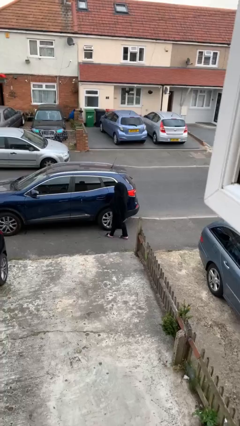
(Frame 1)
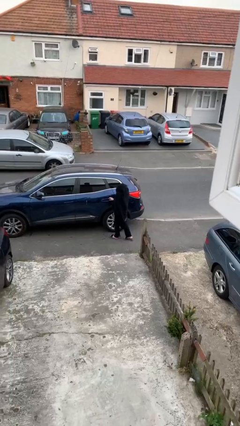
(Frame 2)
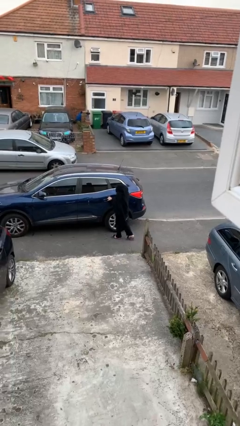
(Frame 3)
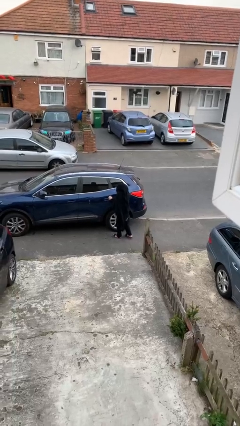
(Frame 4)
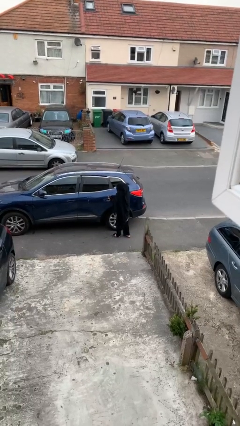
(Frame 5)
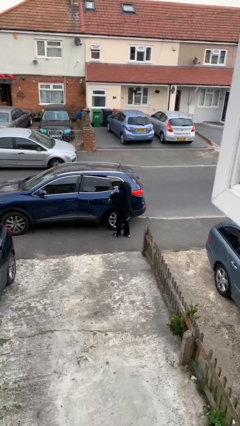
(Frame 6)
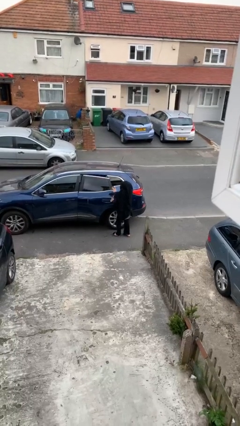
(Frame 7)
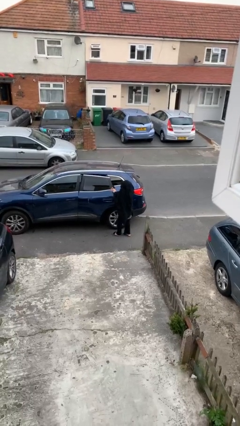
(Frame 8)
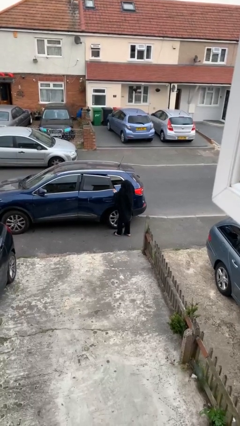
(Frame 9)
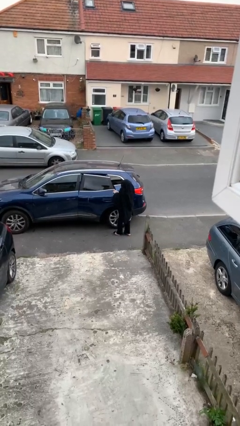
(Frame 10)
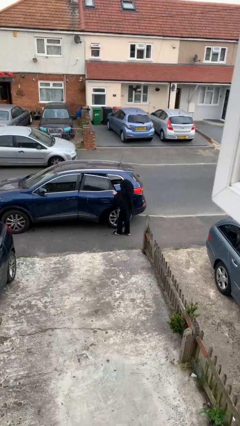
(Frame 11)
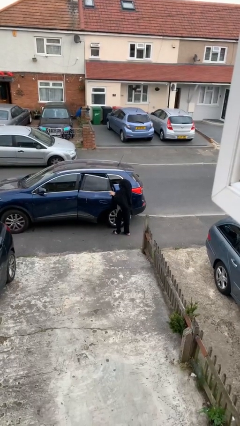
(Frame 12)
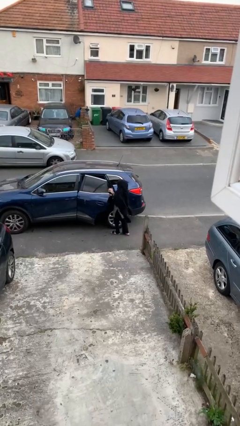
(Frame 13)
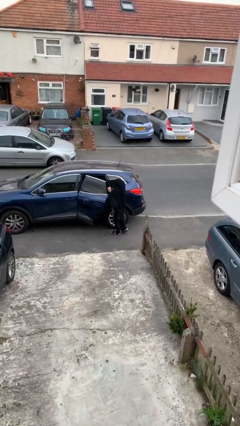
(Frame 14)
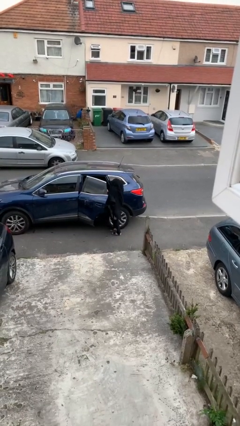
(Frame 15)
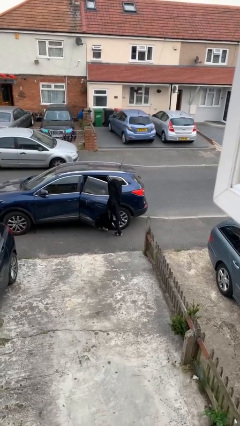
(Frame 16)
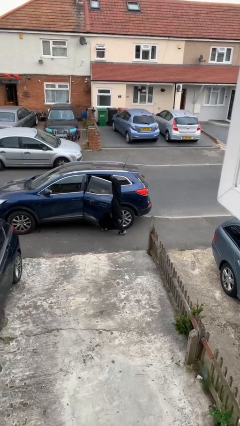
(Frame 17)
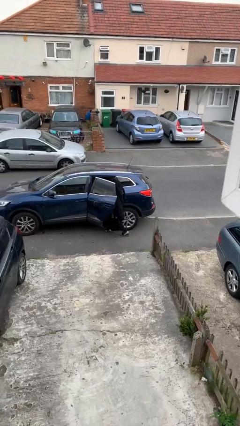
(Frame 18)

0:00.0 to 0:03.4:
person opens car door

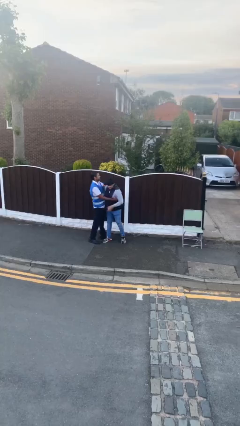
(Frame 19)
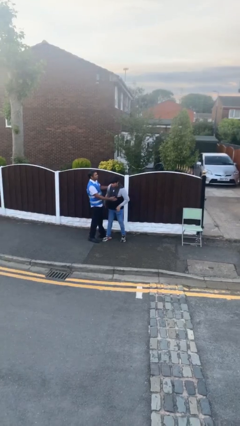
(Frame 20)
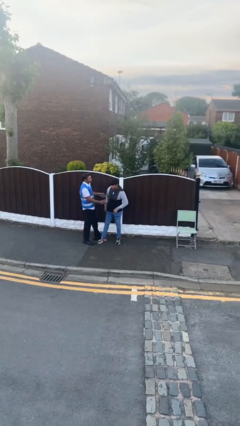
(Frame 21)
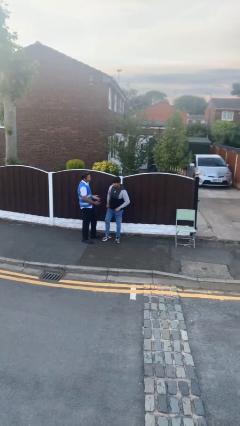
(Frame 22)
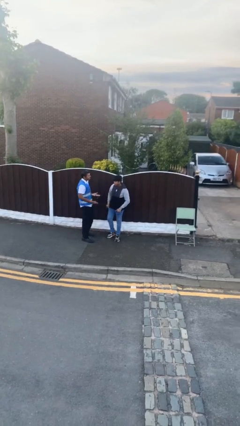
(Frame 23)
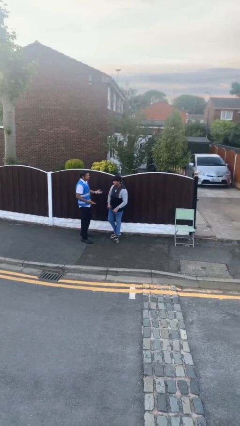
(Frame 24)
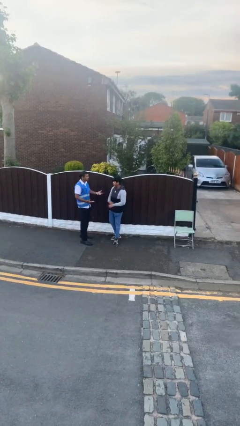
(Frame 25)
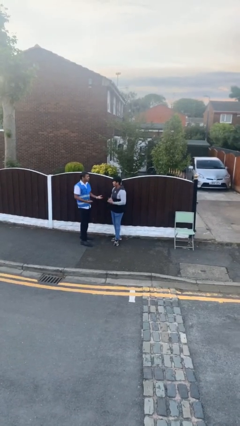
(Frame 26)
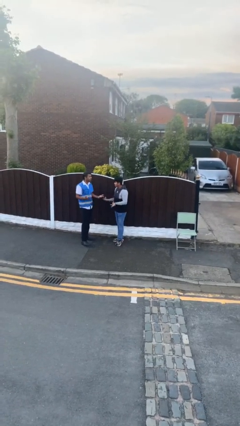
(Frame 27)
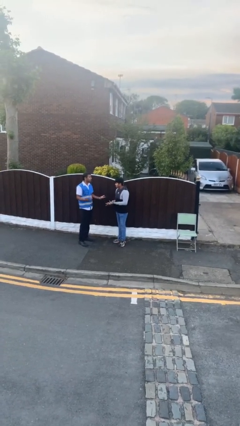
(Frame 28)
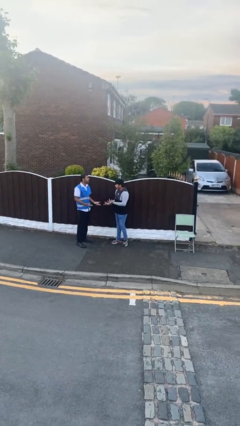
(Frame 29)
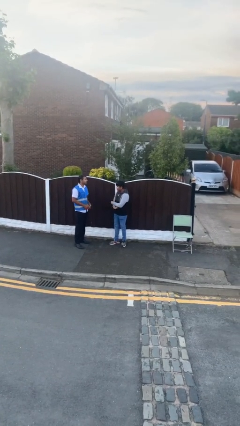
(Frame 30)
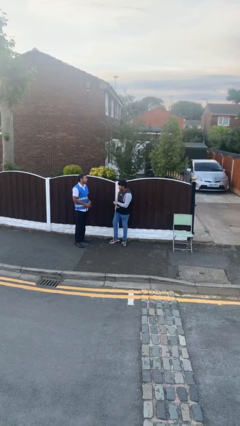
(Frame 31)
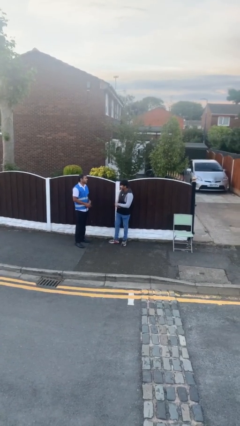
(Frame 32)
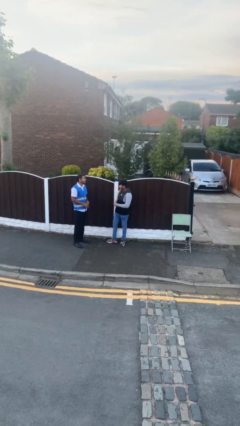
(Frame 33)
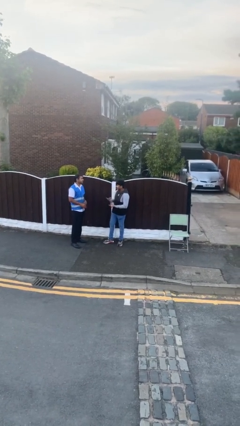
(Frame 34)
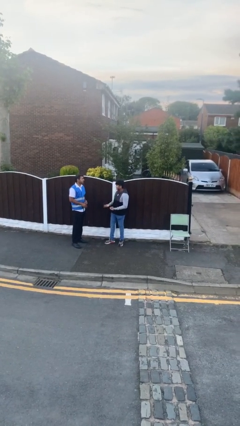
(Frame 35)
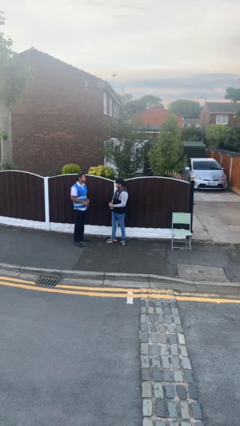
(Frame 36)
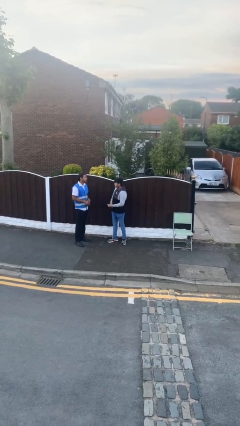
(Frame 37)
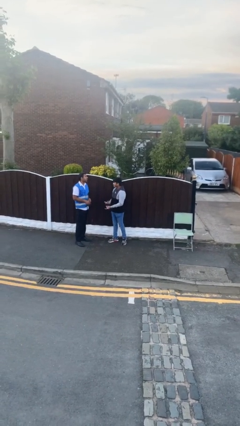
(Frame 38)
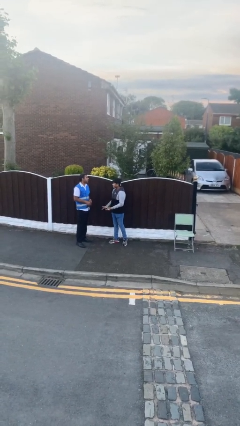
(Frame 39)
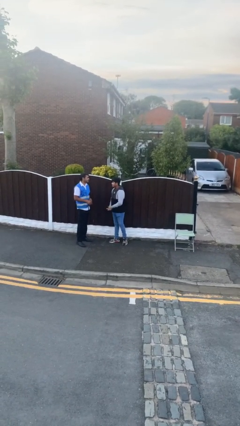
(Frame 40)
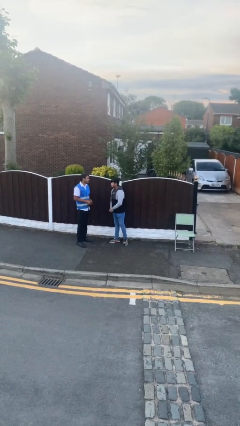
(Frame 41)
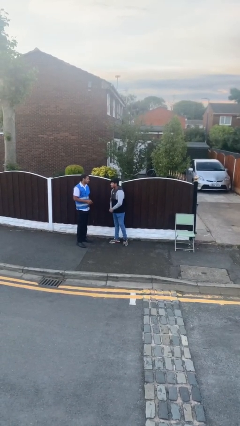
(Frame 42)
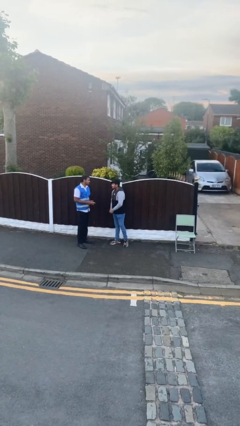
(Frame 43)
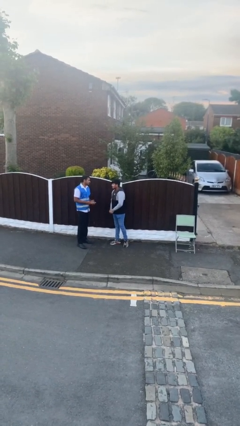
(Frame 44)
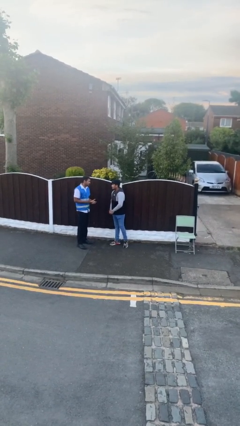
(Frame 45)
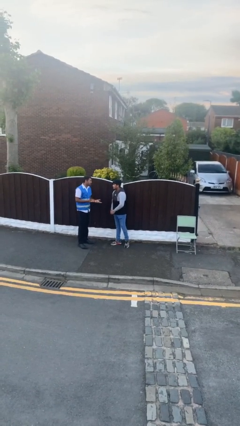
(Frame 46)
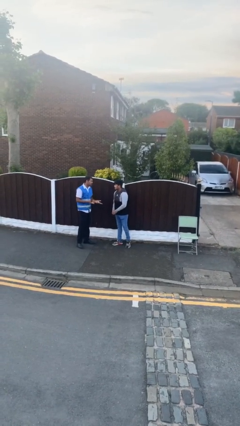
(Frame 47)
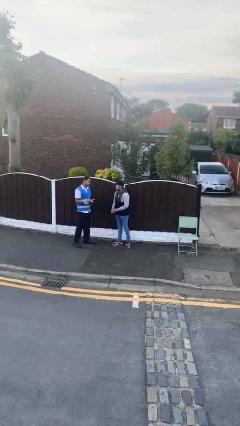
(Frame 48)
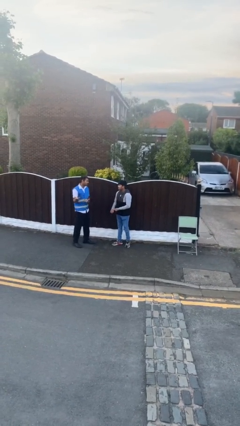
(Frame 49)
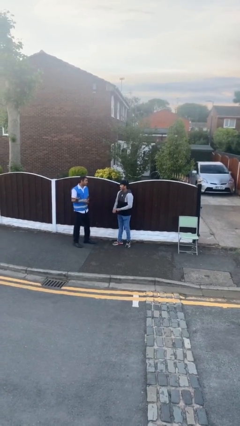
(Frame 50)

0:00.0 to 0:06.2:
person talks to person

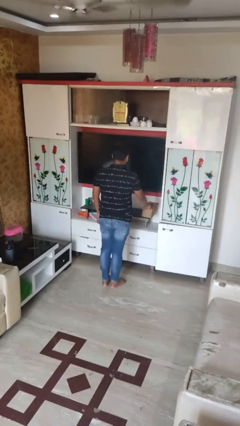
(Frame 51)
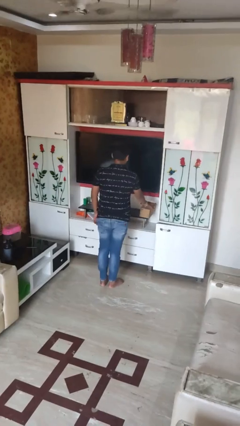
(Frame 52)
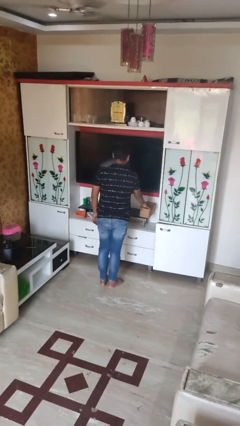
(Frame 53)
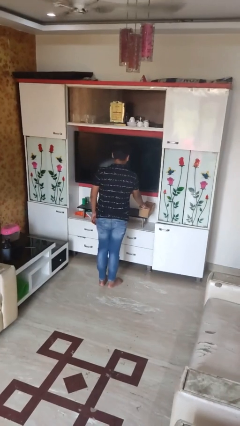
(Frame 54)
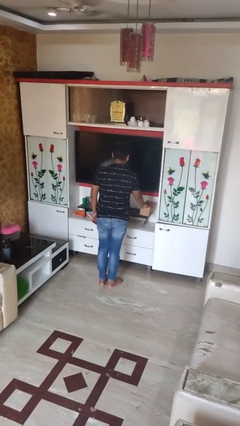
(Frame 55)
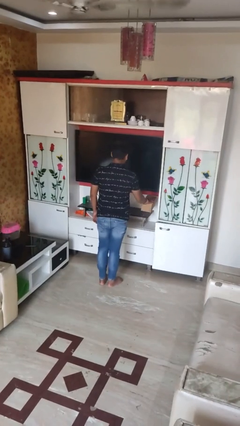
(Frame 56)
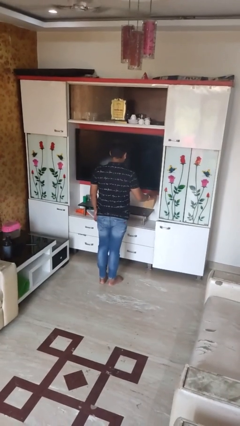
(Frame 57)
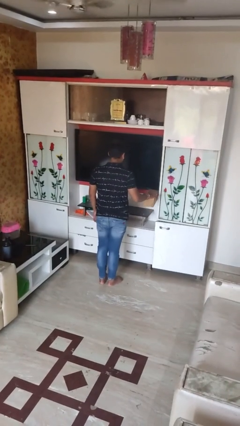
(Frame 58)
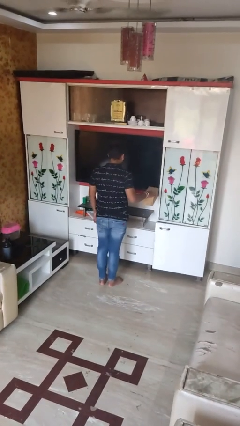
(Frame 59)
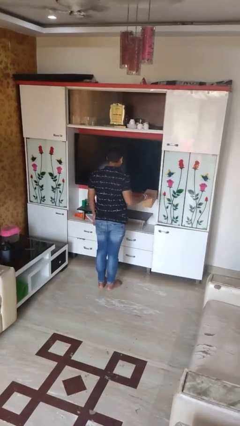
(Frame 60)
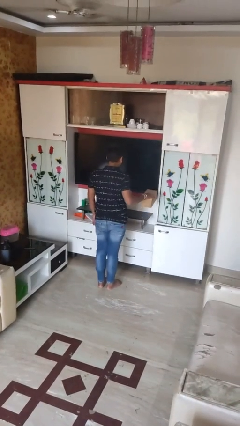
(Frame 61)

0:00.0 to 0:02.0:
person picks up object from countertop

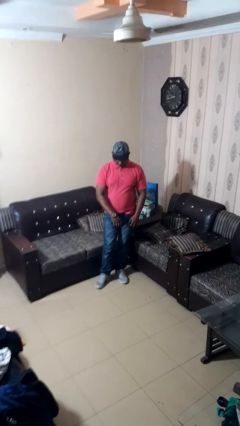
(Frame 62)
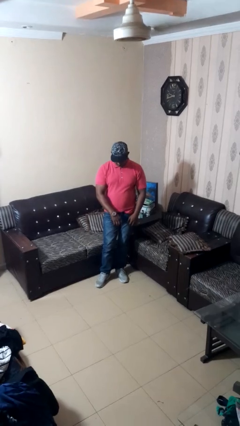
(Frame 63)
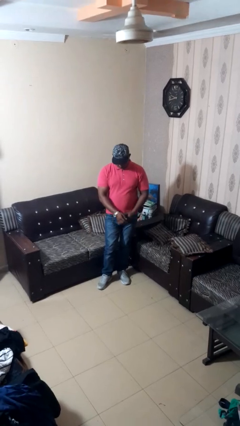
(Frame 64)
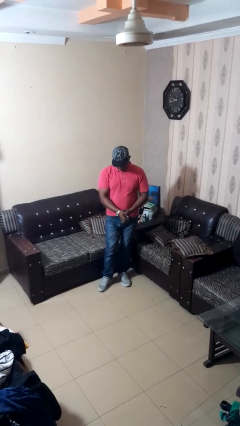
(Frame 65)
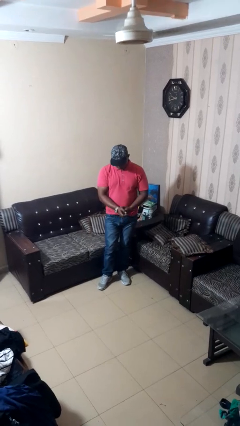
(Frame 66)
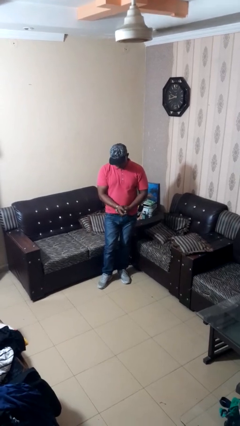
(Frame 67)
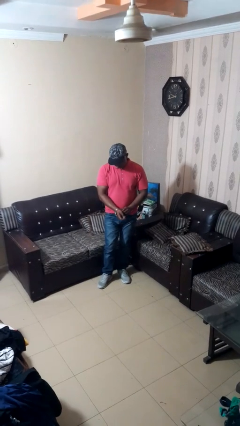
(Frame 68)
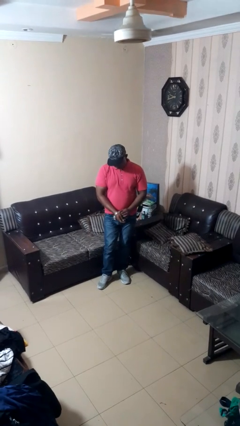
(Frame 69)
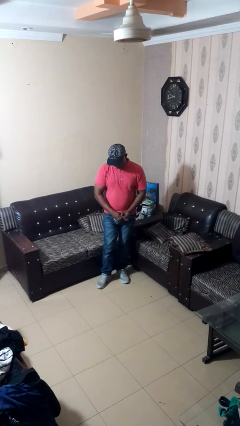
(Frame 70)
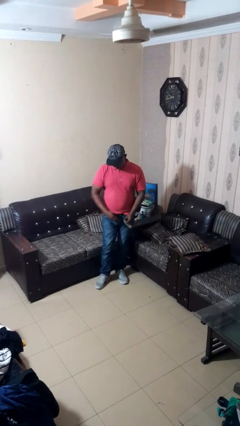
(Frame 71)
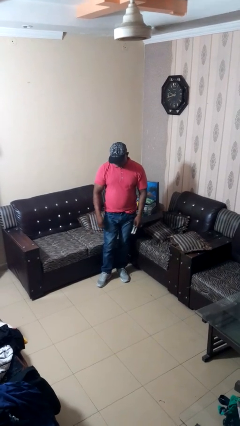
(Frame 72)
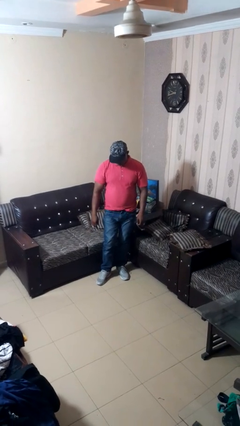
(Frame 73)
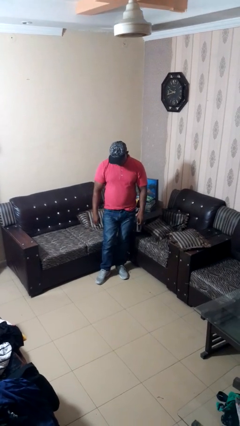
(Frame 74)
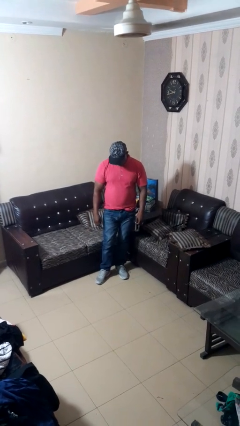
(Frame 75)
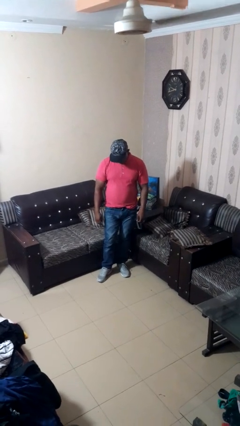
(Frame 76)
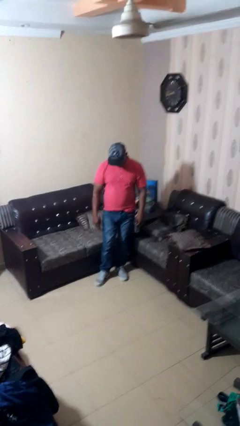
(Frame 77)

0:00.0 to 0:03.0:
person takes off wristwatch

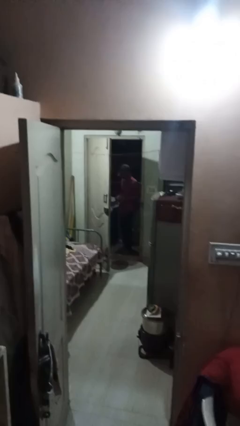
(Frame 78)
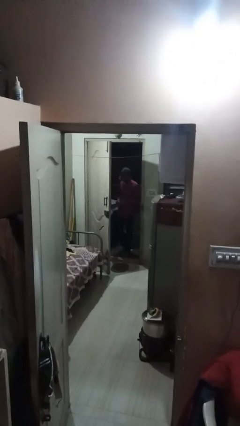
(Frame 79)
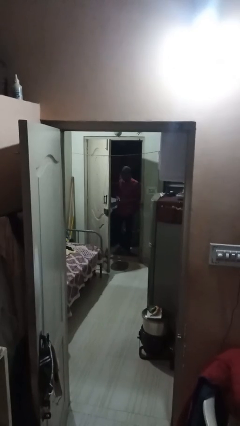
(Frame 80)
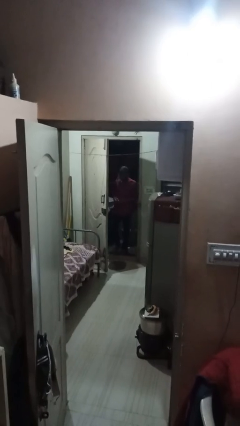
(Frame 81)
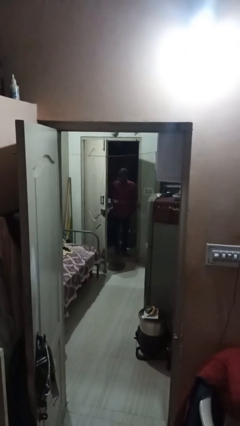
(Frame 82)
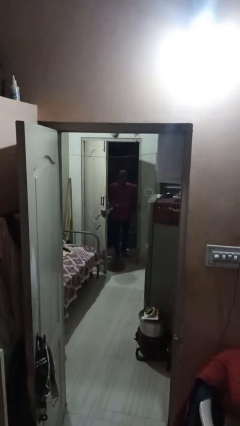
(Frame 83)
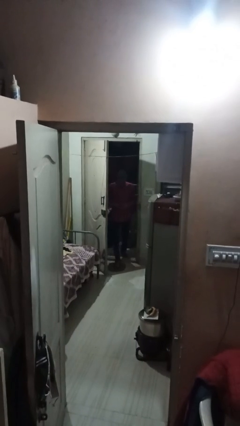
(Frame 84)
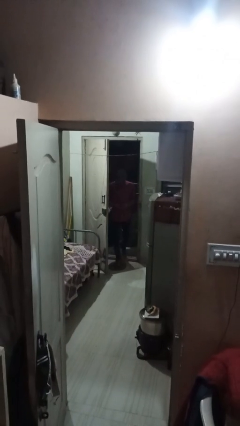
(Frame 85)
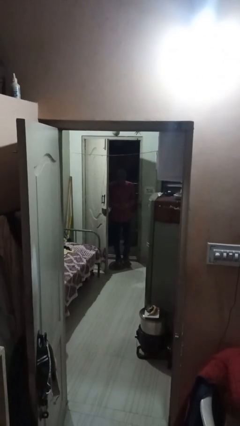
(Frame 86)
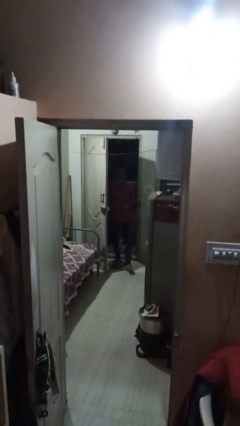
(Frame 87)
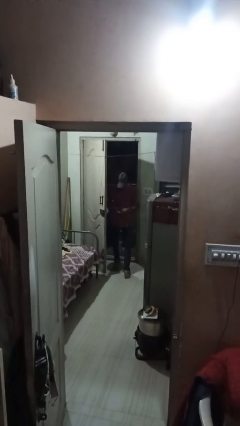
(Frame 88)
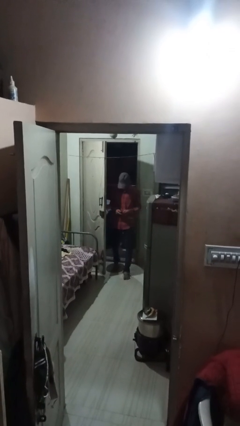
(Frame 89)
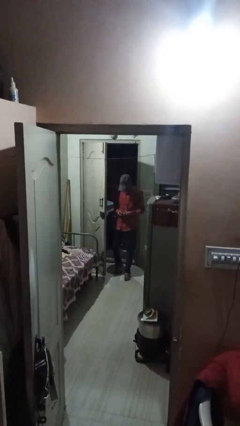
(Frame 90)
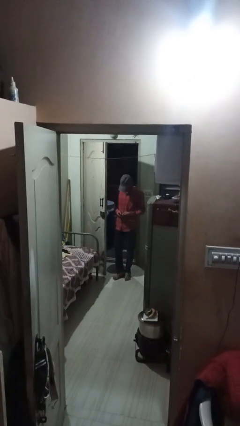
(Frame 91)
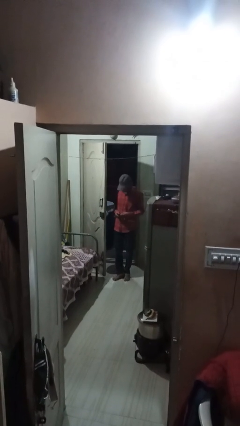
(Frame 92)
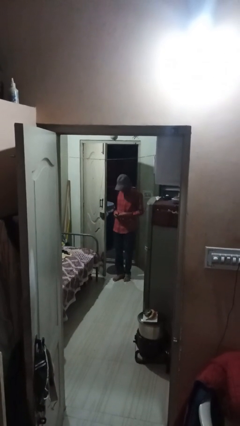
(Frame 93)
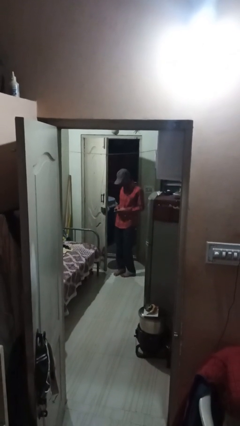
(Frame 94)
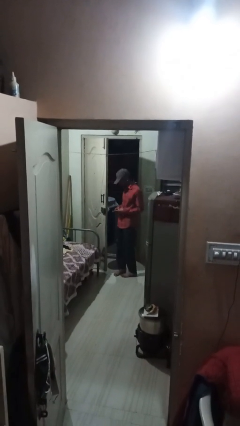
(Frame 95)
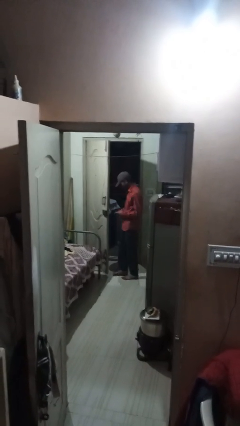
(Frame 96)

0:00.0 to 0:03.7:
person enters scene through structure
